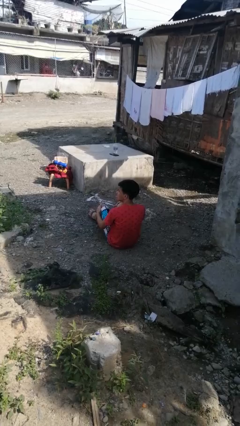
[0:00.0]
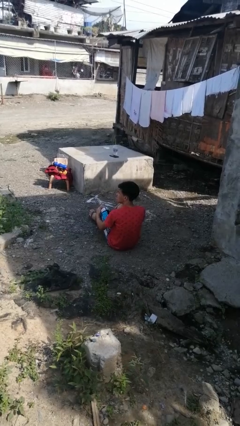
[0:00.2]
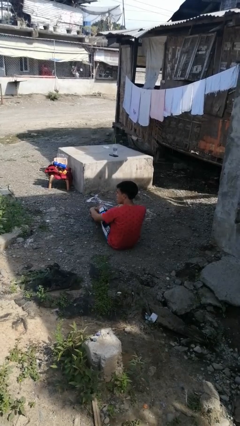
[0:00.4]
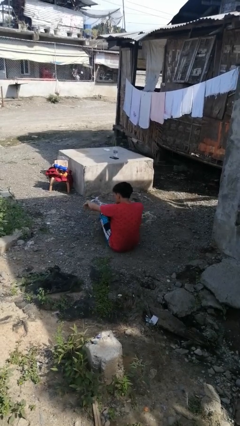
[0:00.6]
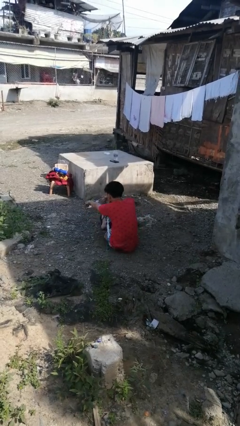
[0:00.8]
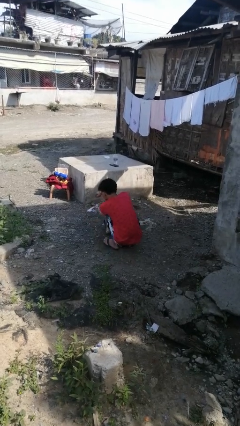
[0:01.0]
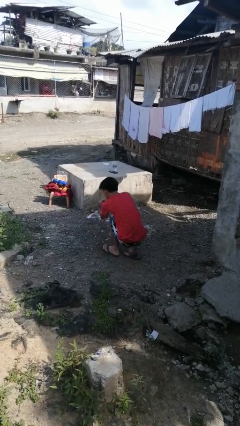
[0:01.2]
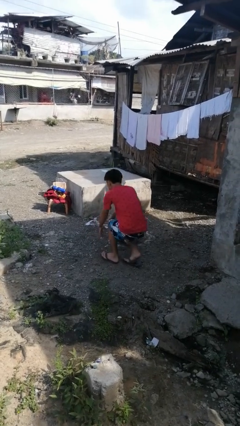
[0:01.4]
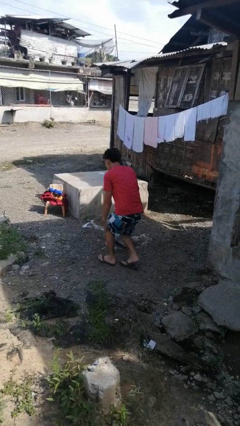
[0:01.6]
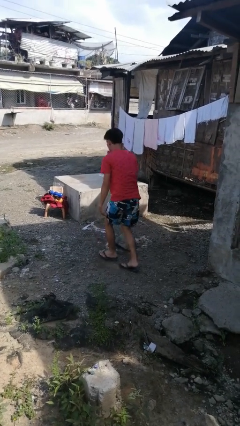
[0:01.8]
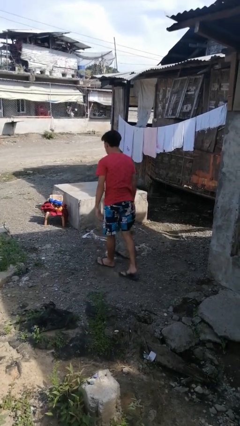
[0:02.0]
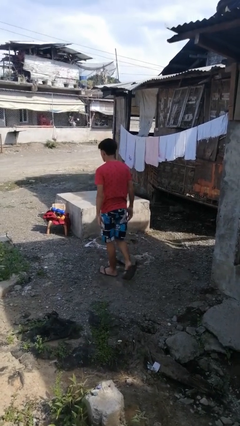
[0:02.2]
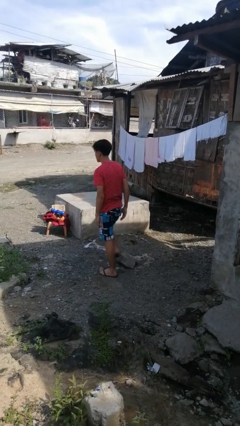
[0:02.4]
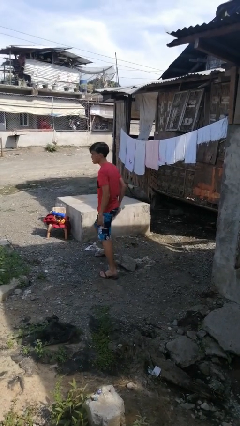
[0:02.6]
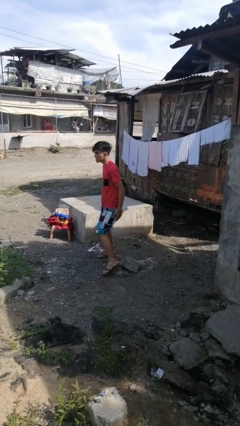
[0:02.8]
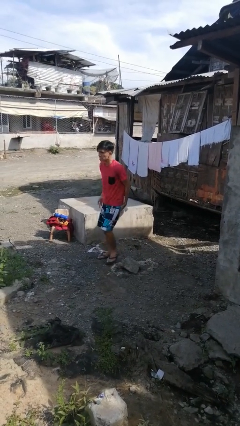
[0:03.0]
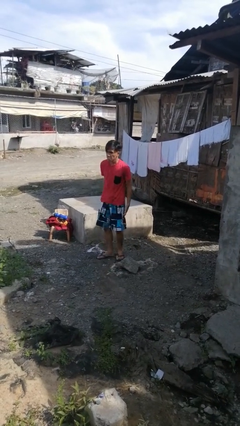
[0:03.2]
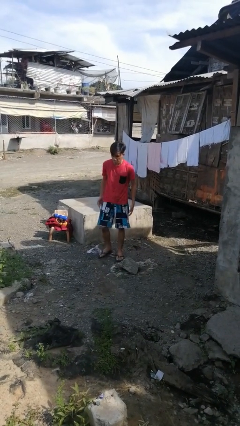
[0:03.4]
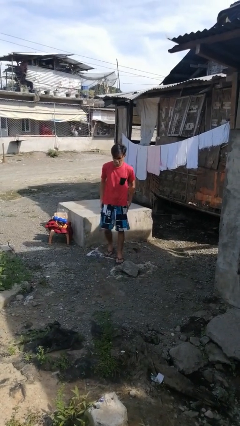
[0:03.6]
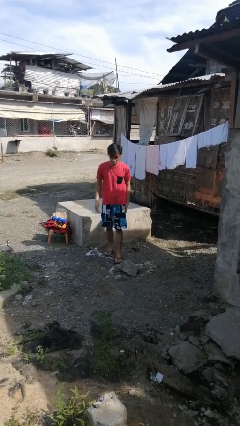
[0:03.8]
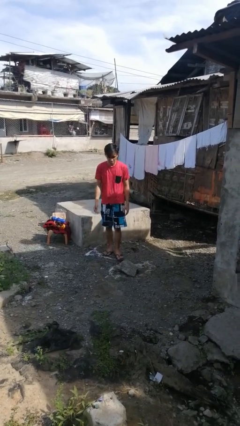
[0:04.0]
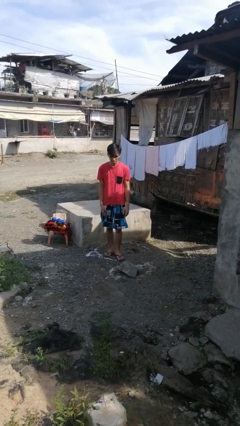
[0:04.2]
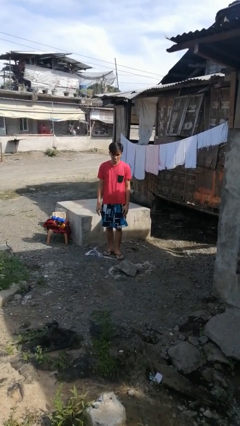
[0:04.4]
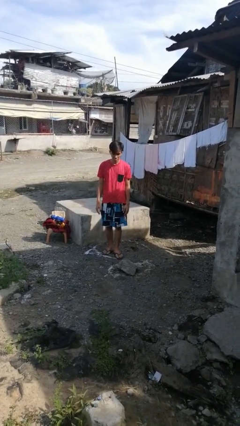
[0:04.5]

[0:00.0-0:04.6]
person stands up from floor

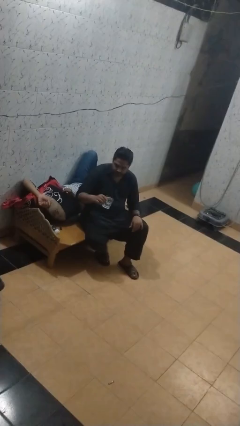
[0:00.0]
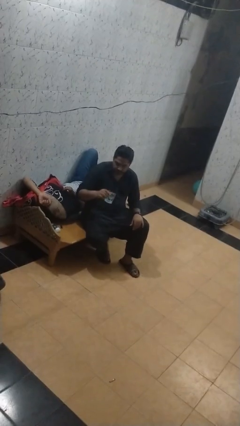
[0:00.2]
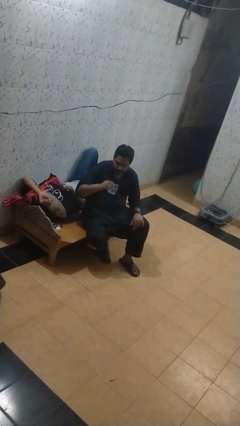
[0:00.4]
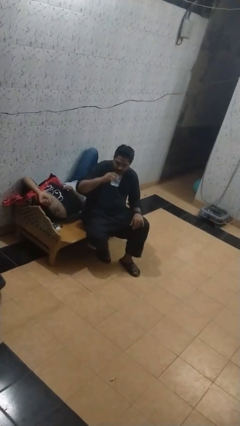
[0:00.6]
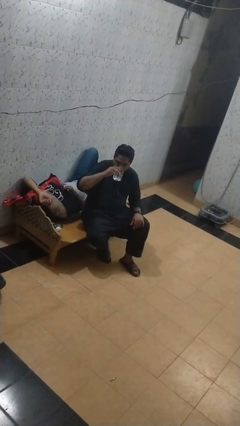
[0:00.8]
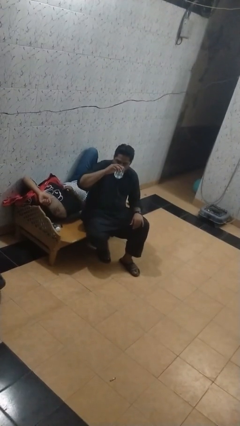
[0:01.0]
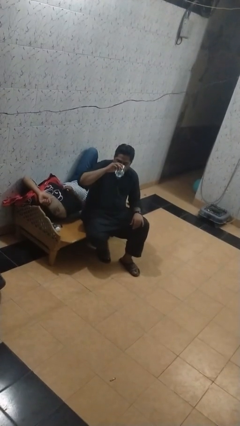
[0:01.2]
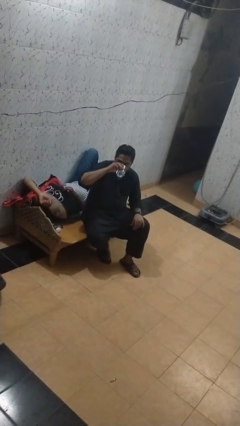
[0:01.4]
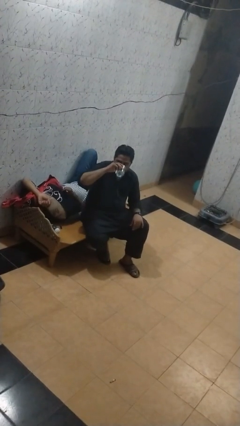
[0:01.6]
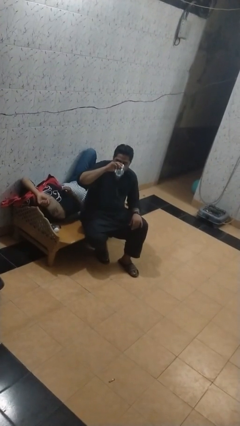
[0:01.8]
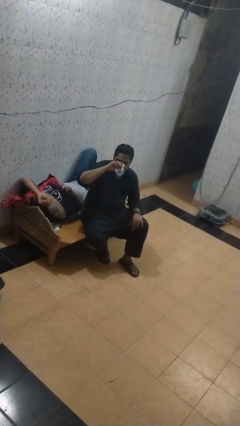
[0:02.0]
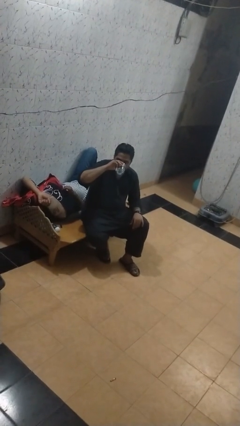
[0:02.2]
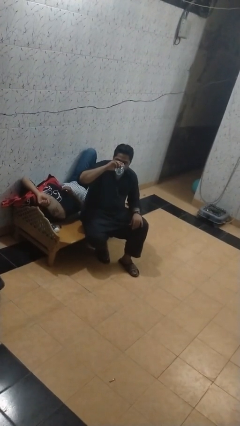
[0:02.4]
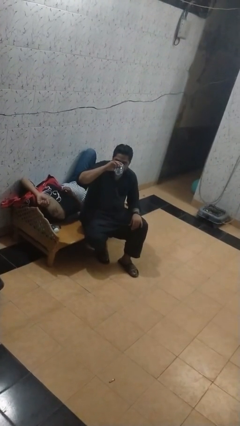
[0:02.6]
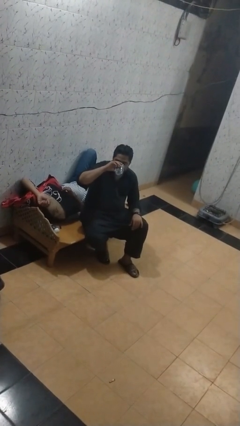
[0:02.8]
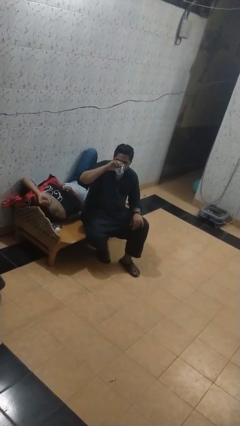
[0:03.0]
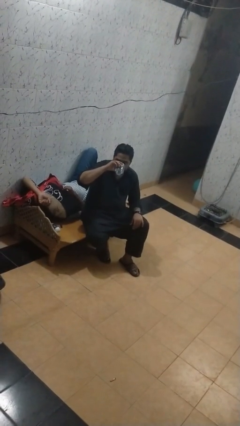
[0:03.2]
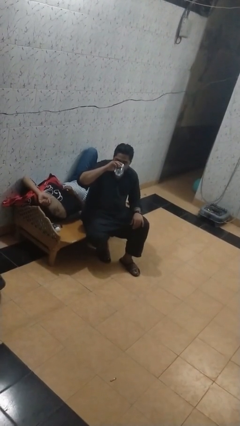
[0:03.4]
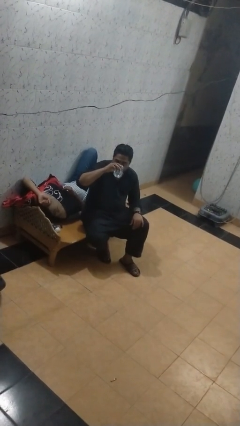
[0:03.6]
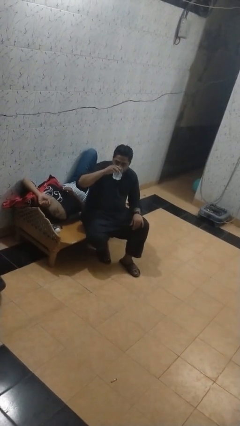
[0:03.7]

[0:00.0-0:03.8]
person drinks from mug

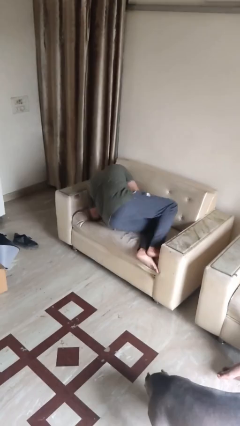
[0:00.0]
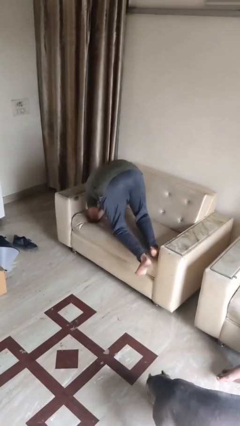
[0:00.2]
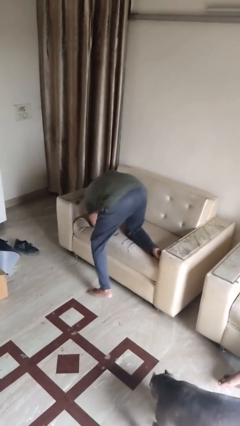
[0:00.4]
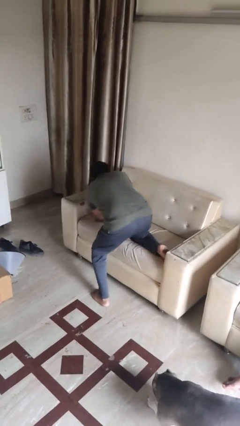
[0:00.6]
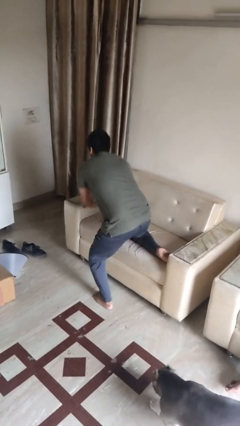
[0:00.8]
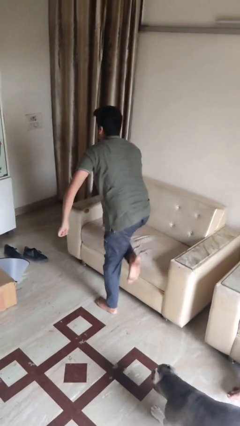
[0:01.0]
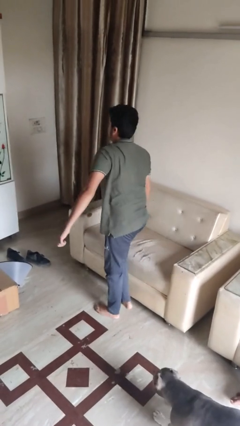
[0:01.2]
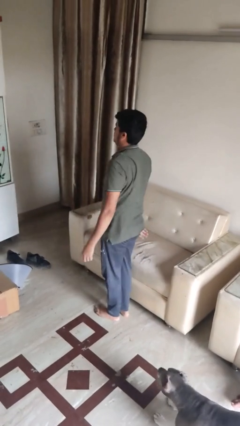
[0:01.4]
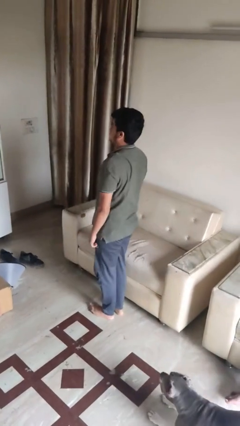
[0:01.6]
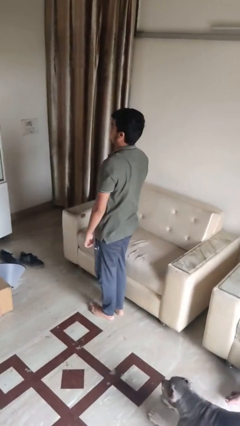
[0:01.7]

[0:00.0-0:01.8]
person stands up

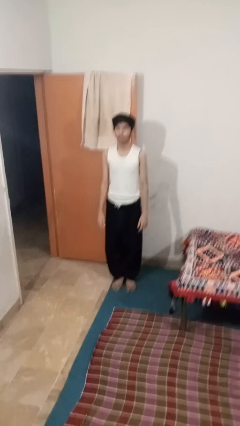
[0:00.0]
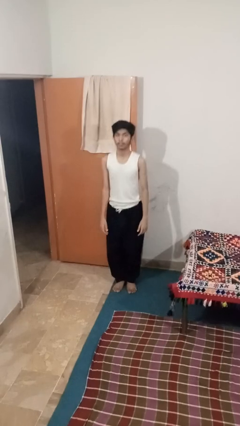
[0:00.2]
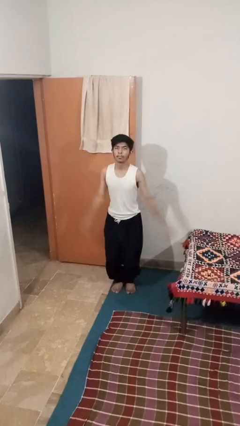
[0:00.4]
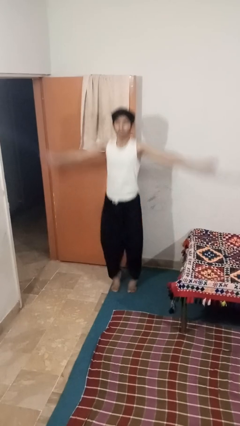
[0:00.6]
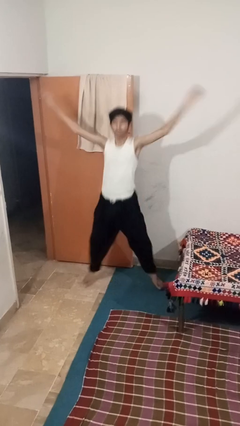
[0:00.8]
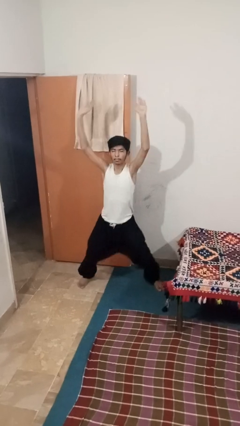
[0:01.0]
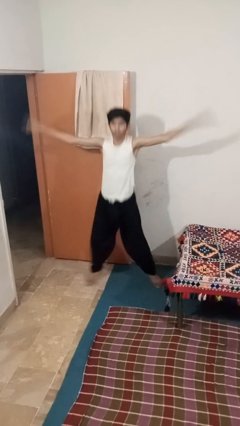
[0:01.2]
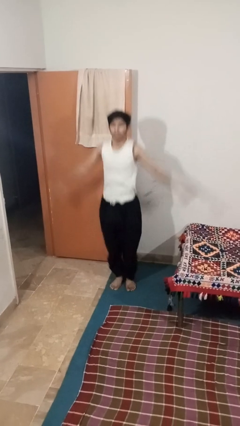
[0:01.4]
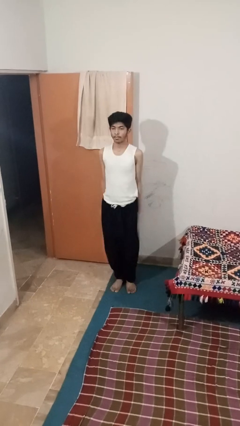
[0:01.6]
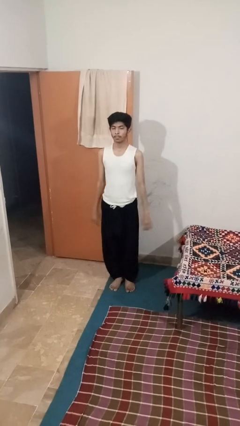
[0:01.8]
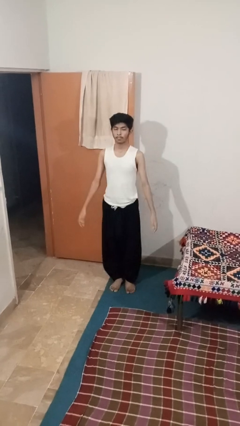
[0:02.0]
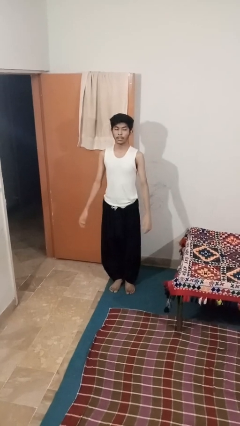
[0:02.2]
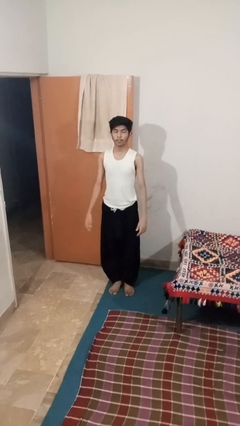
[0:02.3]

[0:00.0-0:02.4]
person exercises with jumping jacks

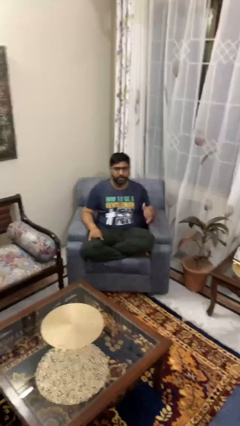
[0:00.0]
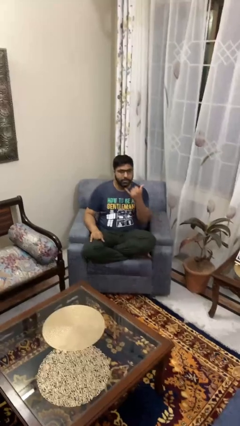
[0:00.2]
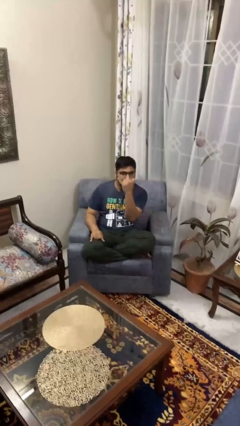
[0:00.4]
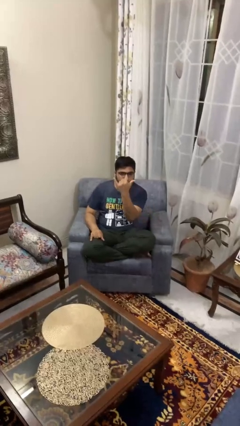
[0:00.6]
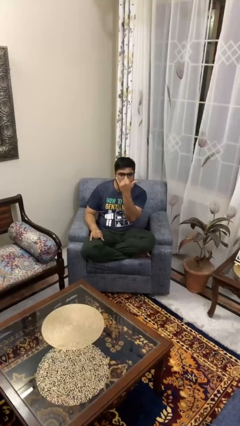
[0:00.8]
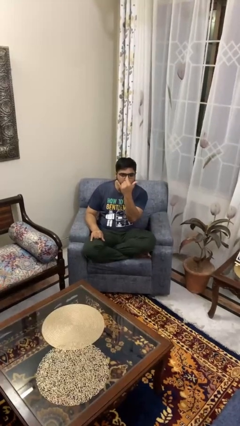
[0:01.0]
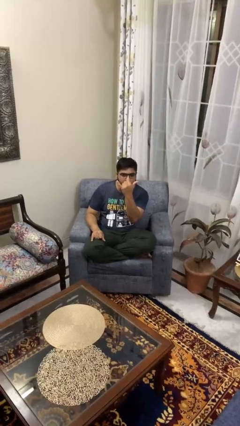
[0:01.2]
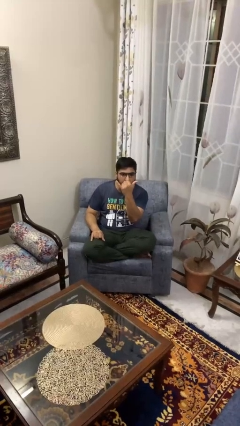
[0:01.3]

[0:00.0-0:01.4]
person gestures hang loose

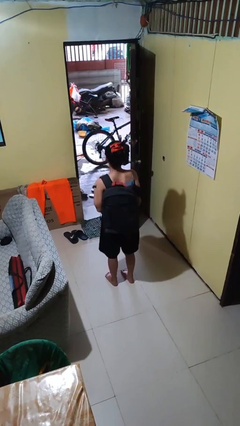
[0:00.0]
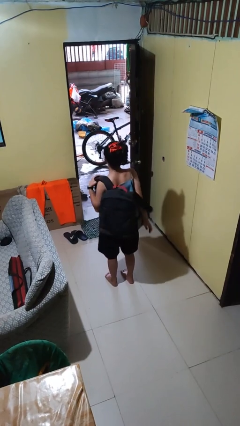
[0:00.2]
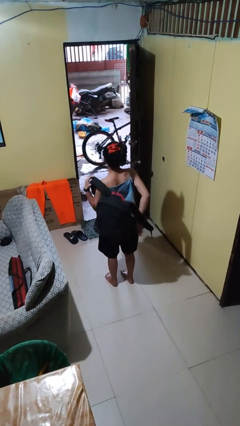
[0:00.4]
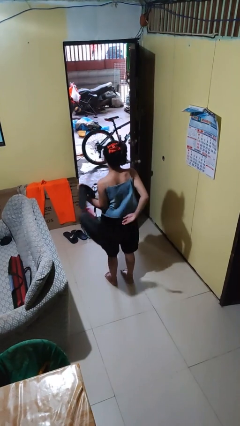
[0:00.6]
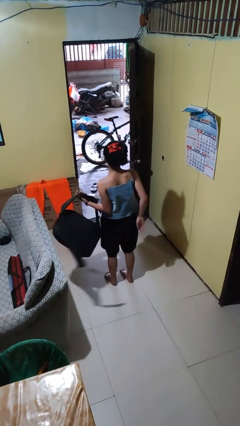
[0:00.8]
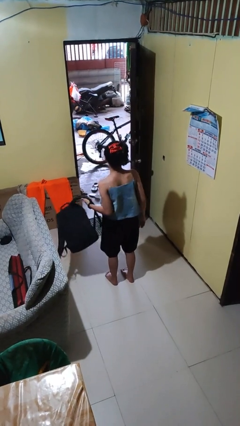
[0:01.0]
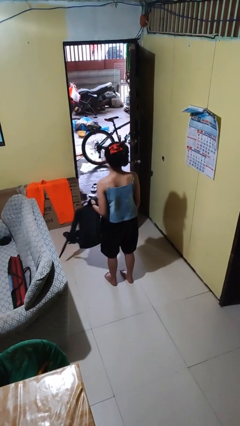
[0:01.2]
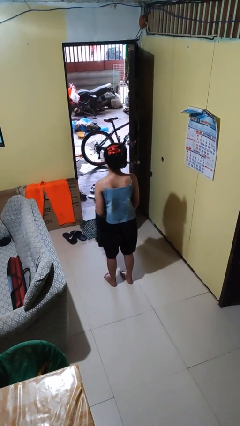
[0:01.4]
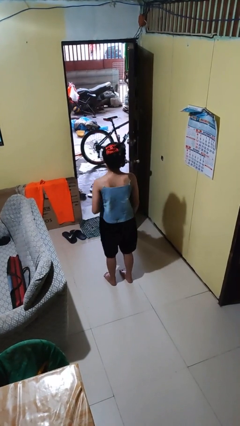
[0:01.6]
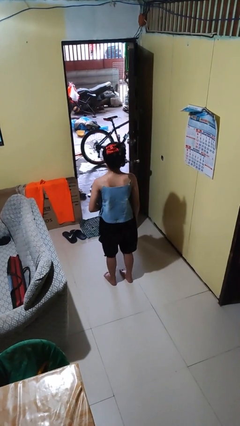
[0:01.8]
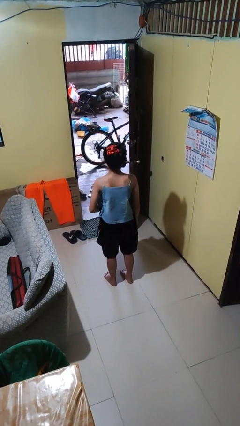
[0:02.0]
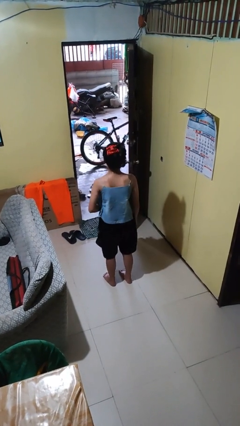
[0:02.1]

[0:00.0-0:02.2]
person takes off backpack

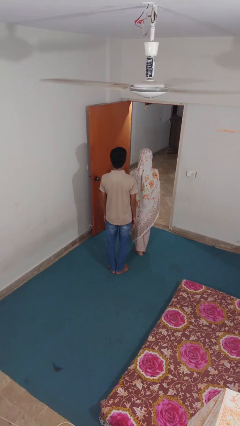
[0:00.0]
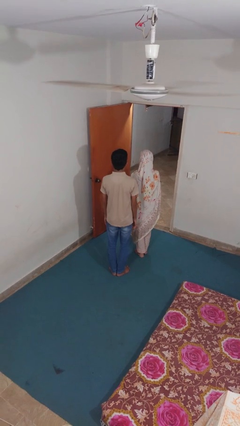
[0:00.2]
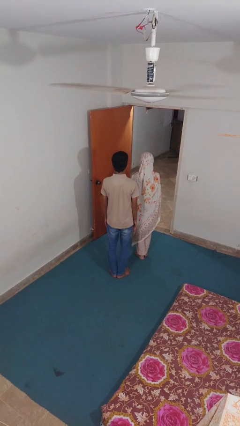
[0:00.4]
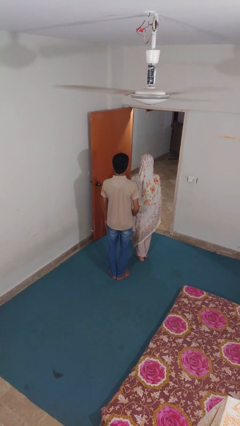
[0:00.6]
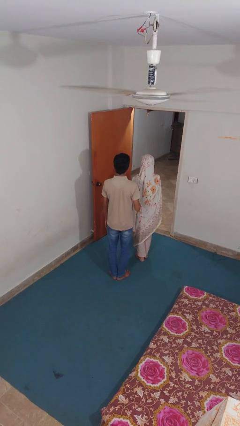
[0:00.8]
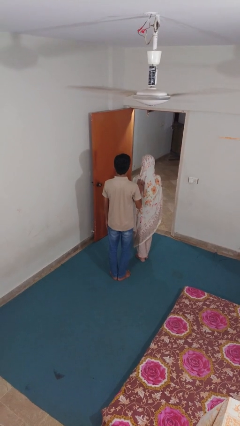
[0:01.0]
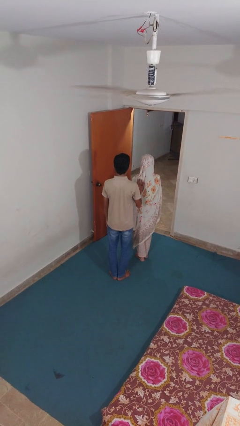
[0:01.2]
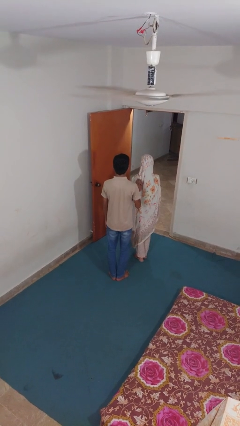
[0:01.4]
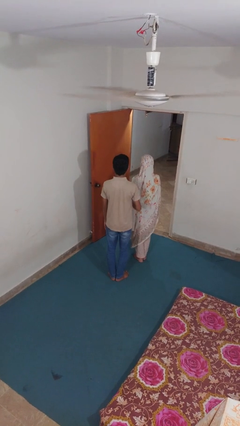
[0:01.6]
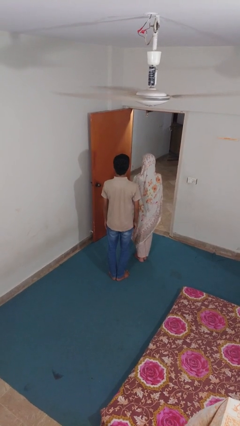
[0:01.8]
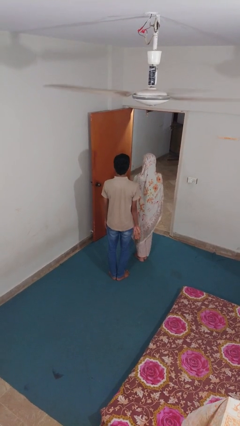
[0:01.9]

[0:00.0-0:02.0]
person touches back of person
